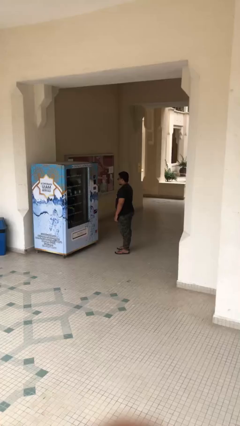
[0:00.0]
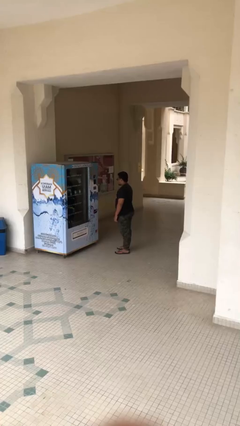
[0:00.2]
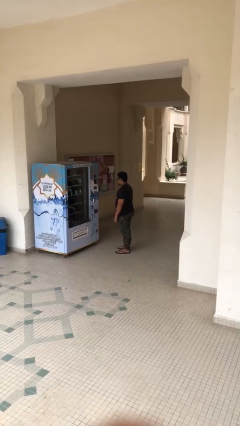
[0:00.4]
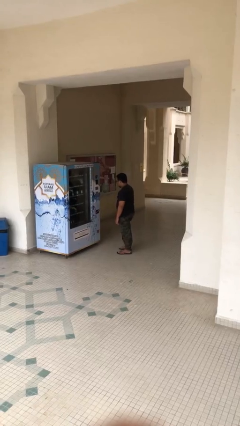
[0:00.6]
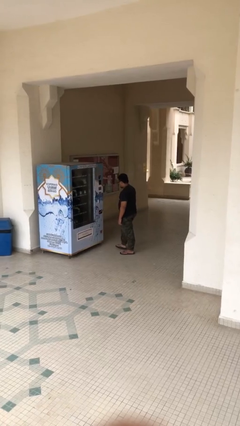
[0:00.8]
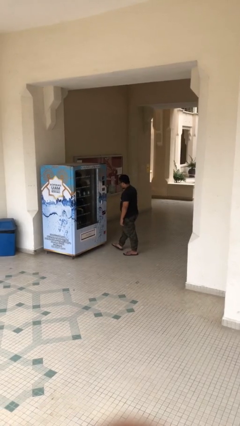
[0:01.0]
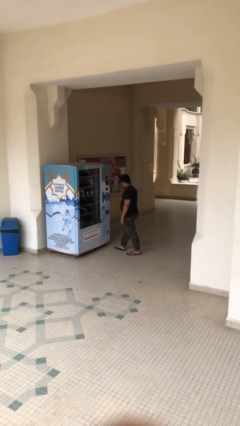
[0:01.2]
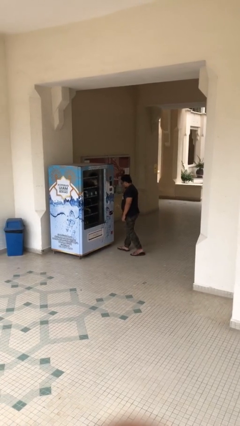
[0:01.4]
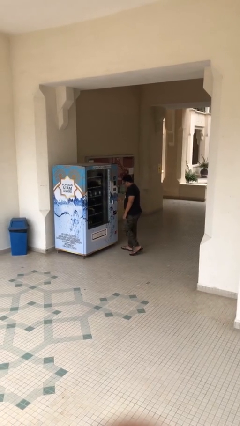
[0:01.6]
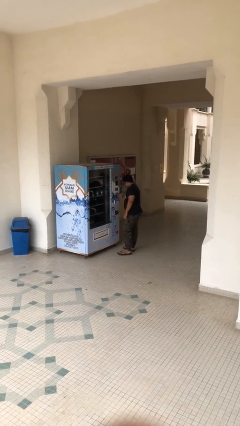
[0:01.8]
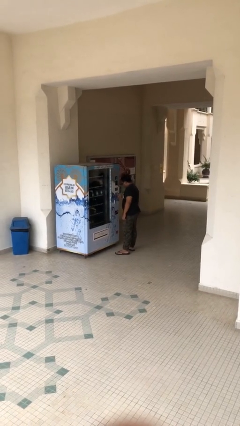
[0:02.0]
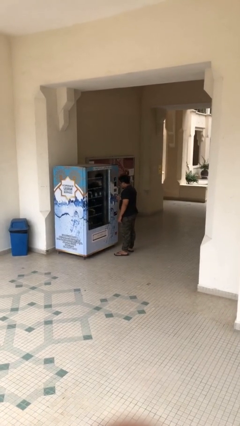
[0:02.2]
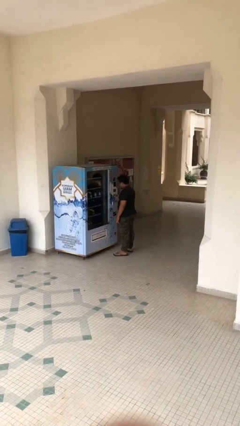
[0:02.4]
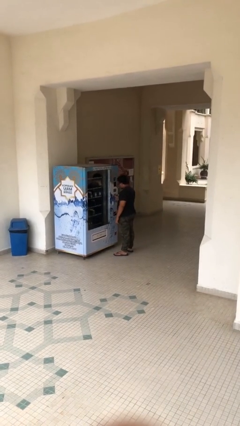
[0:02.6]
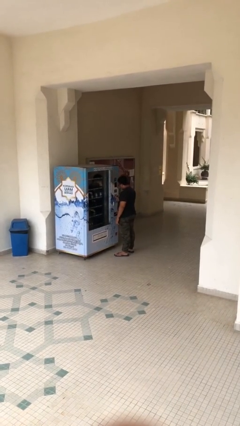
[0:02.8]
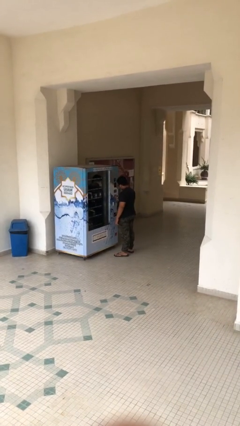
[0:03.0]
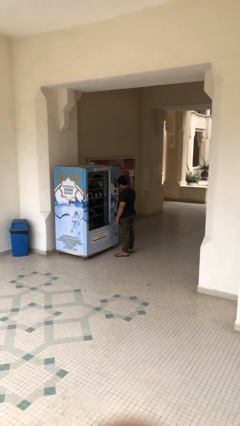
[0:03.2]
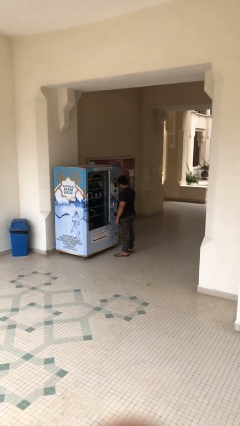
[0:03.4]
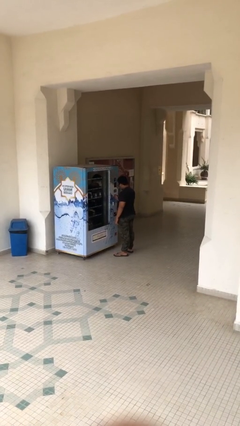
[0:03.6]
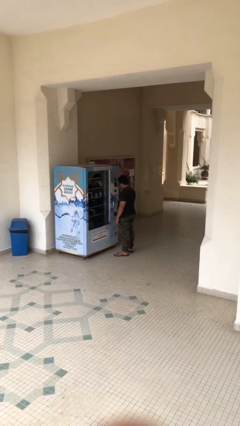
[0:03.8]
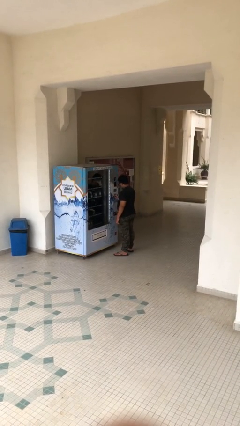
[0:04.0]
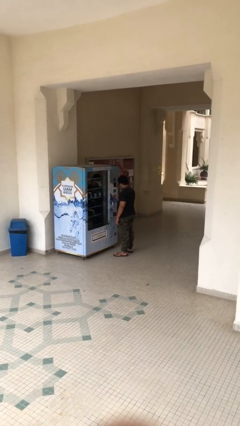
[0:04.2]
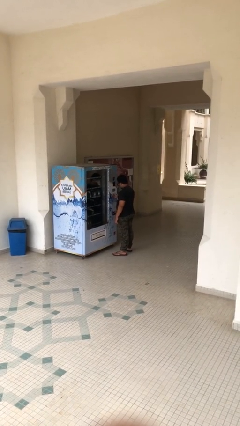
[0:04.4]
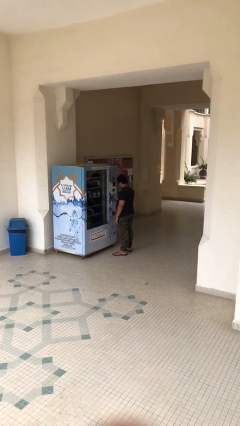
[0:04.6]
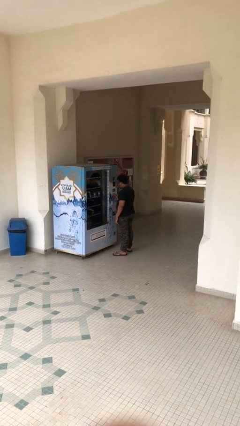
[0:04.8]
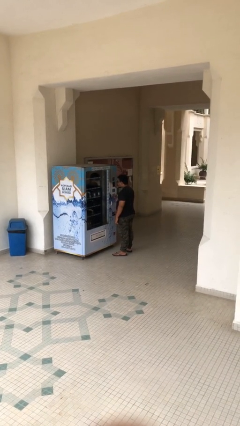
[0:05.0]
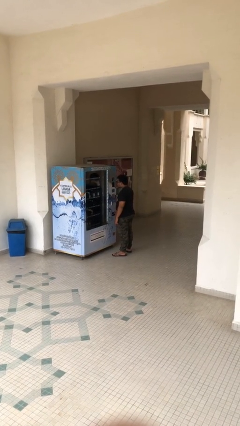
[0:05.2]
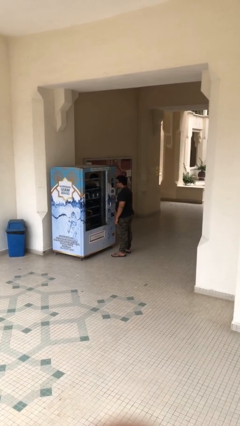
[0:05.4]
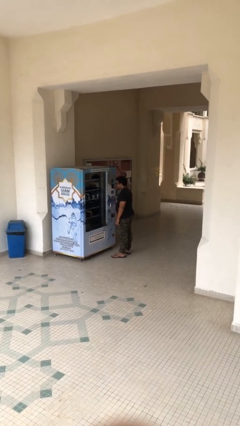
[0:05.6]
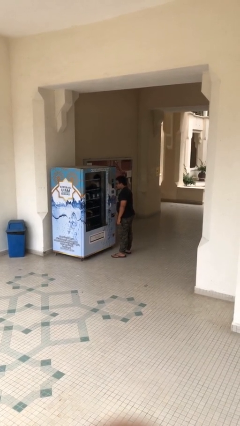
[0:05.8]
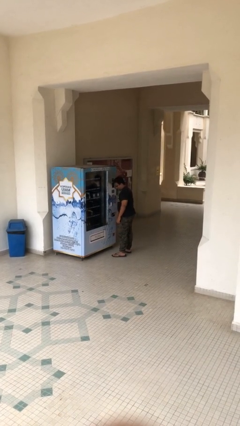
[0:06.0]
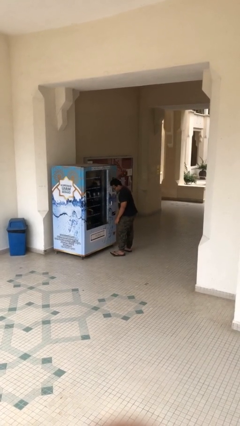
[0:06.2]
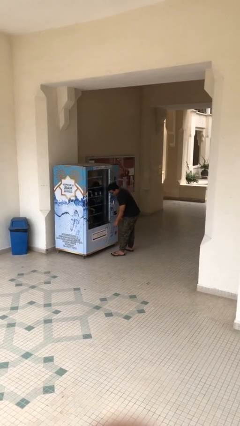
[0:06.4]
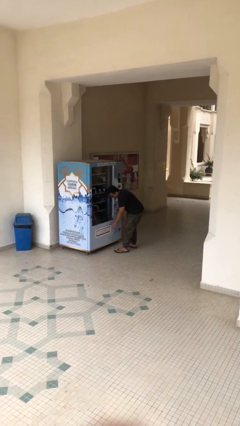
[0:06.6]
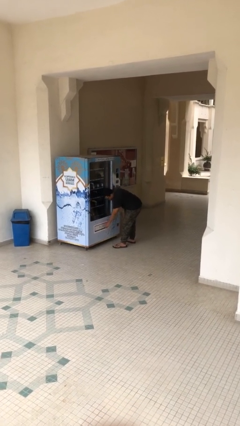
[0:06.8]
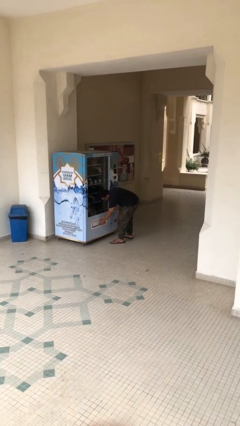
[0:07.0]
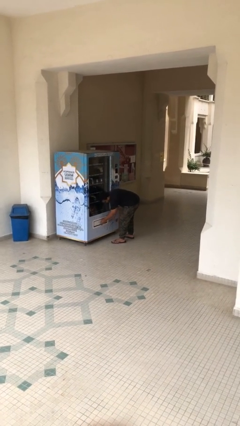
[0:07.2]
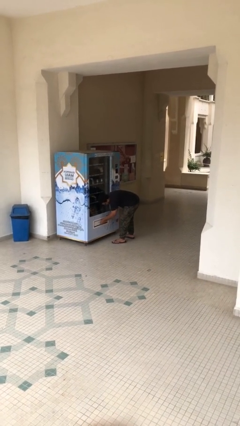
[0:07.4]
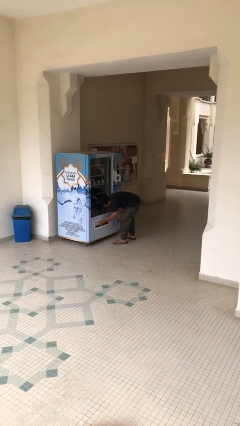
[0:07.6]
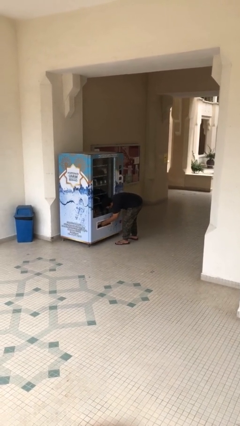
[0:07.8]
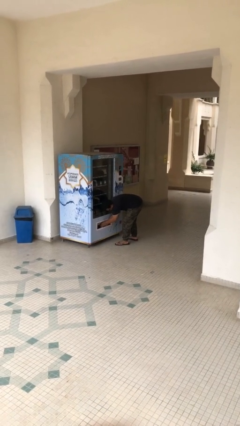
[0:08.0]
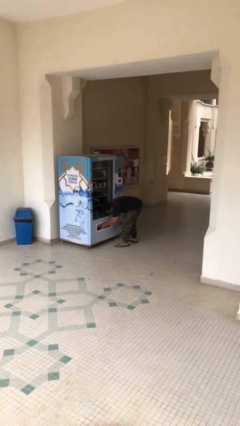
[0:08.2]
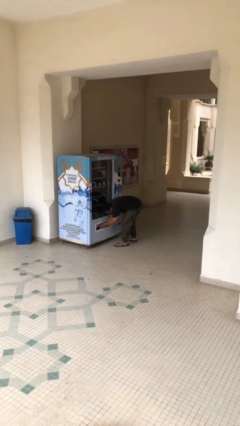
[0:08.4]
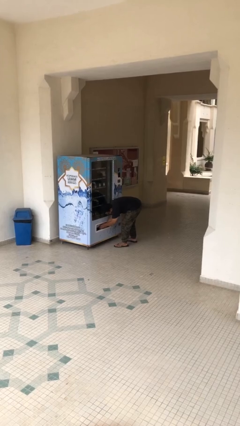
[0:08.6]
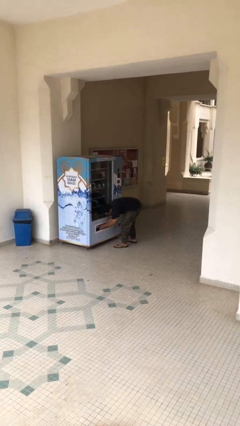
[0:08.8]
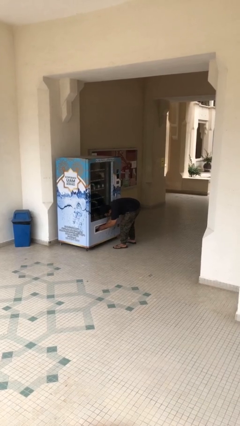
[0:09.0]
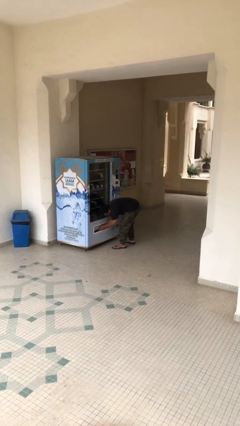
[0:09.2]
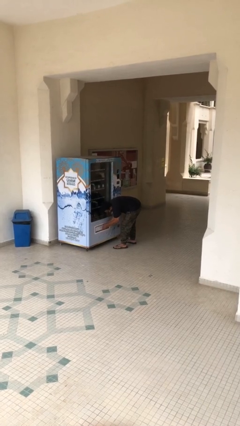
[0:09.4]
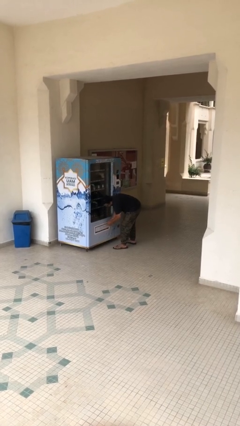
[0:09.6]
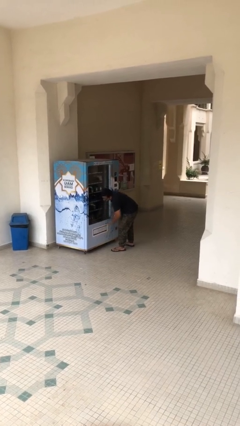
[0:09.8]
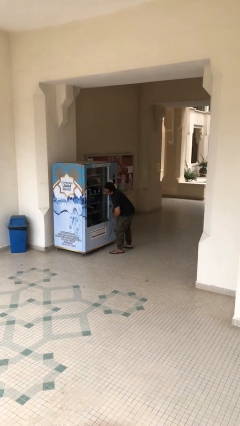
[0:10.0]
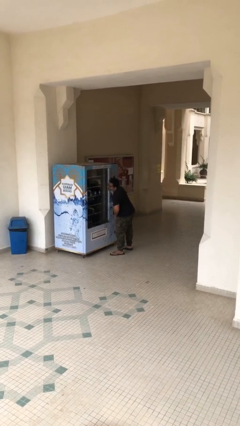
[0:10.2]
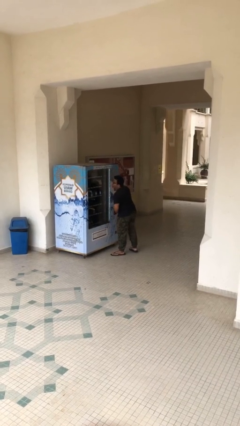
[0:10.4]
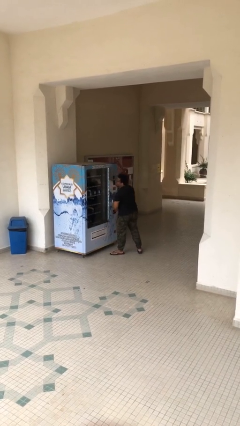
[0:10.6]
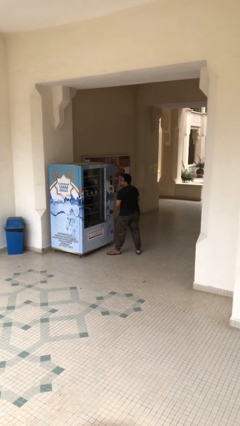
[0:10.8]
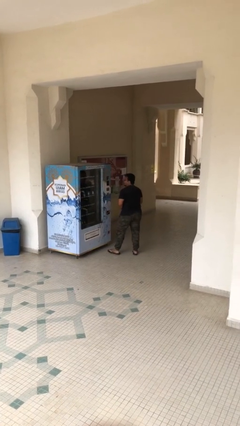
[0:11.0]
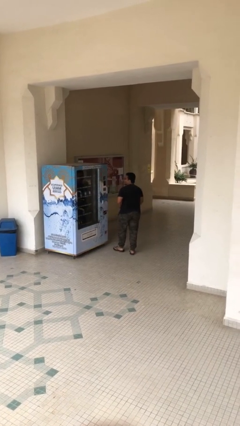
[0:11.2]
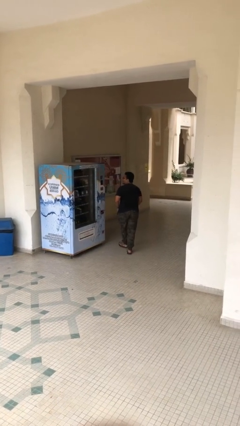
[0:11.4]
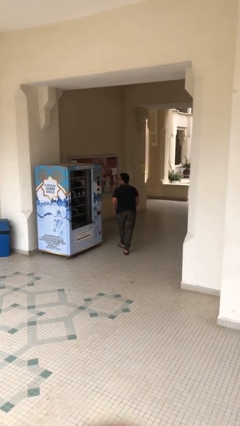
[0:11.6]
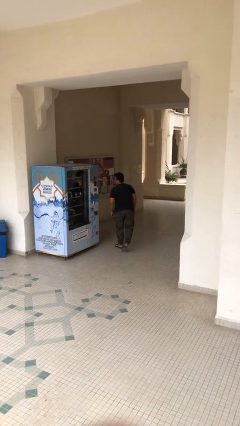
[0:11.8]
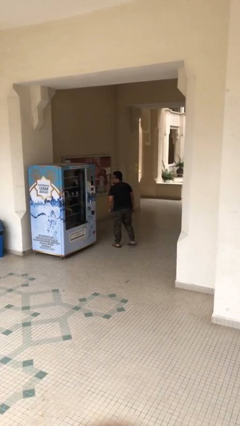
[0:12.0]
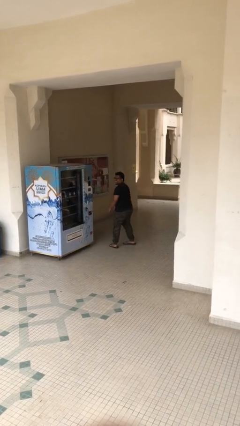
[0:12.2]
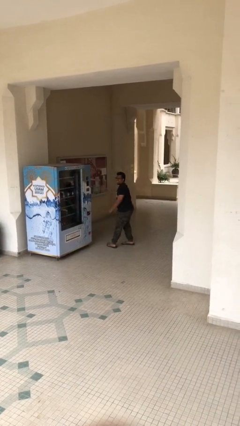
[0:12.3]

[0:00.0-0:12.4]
person purchases from machine

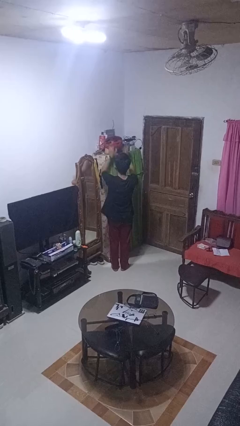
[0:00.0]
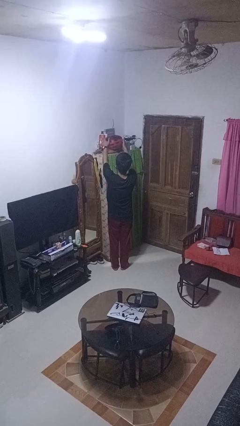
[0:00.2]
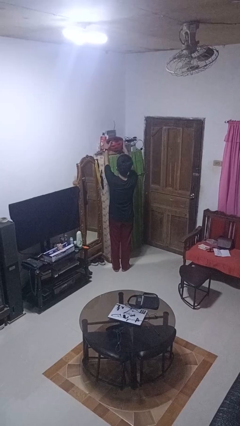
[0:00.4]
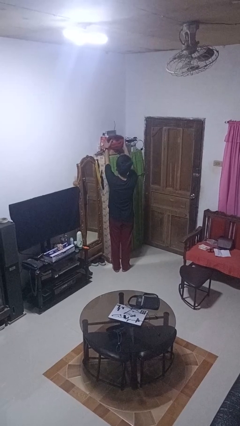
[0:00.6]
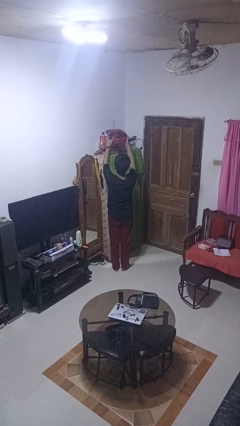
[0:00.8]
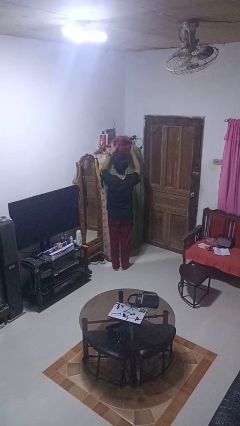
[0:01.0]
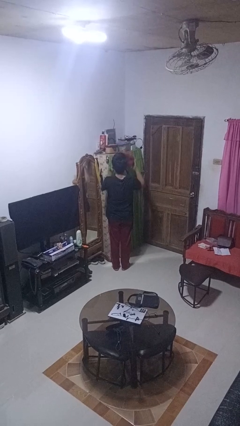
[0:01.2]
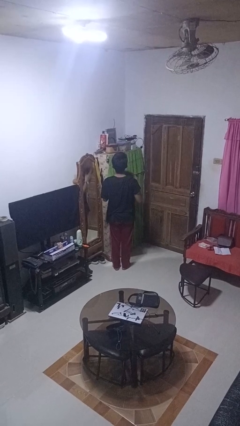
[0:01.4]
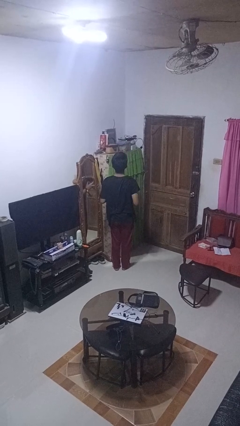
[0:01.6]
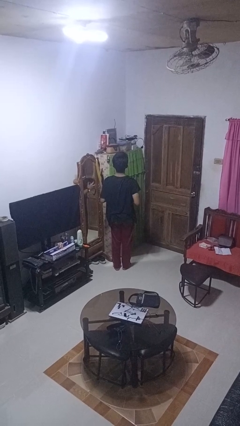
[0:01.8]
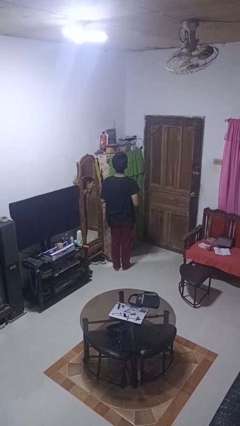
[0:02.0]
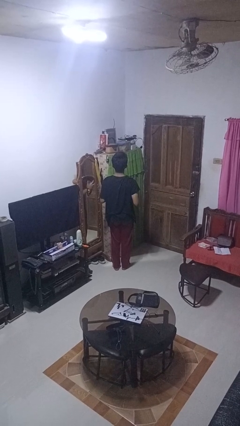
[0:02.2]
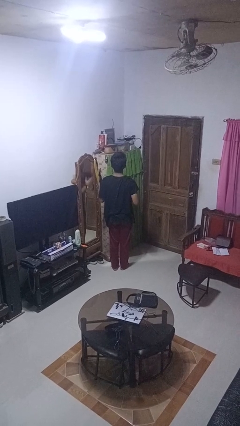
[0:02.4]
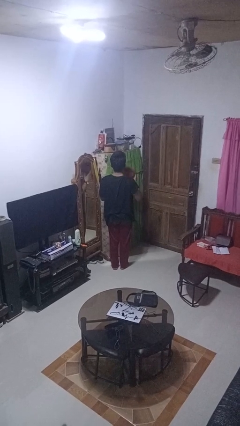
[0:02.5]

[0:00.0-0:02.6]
person picks up object from shelf

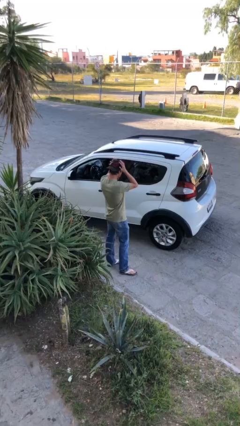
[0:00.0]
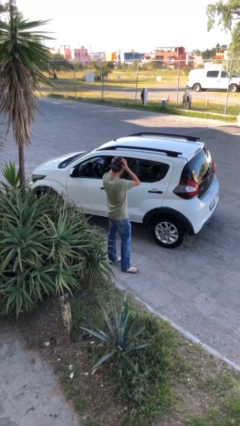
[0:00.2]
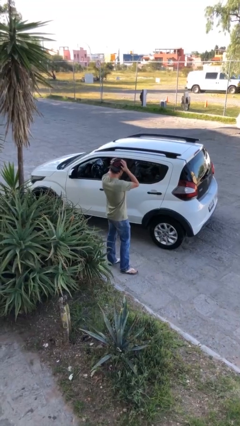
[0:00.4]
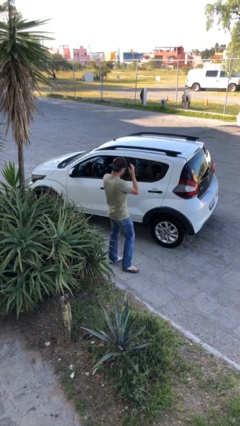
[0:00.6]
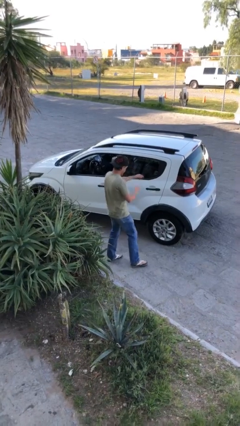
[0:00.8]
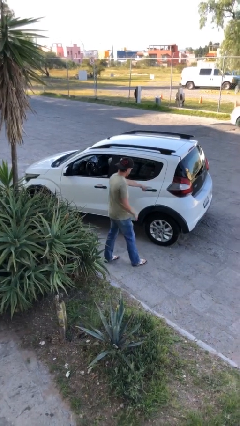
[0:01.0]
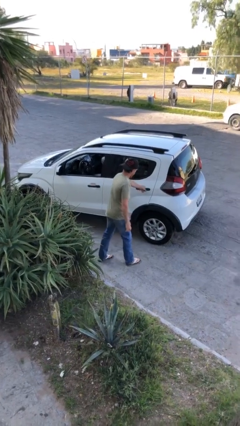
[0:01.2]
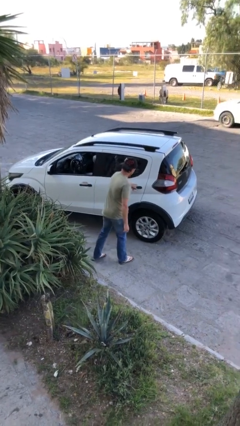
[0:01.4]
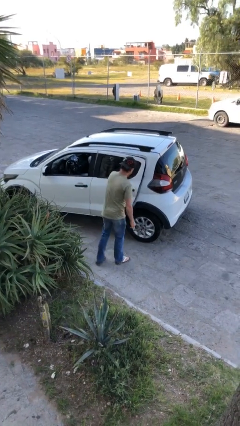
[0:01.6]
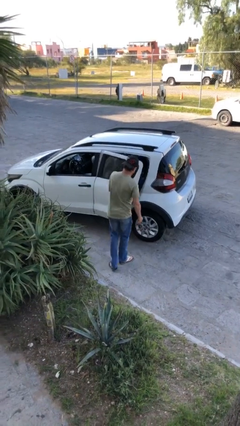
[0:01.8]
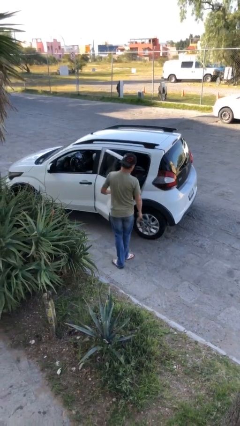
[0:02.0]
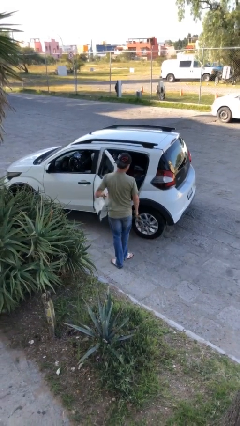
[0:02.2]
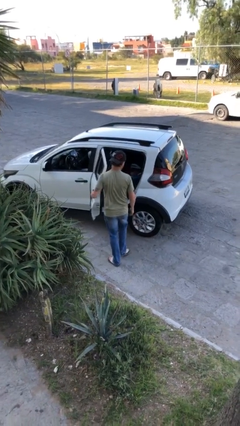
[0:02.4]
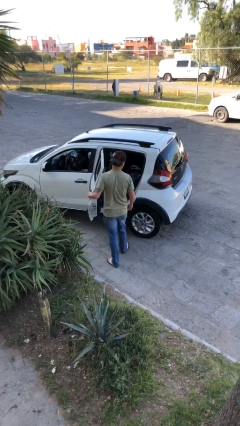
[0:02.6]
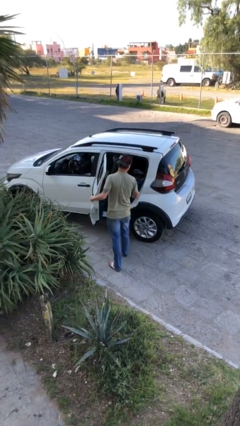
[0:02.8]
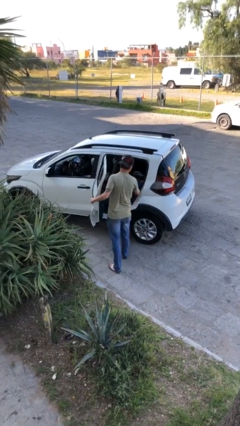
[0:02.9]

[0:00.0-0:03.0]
person opens car door
